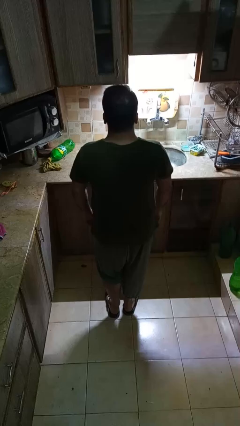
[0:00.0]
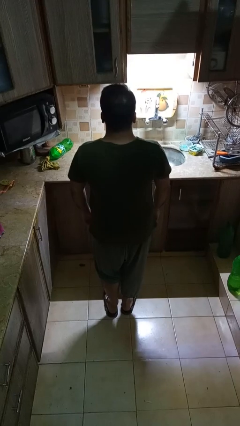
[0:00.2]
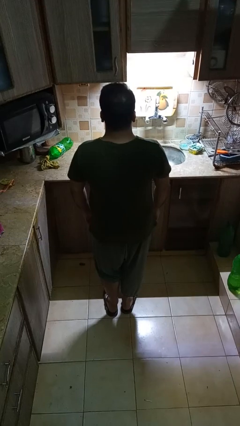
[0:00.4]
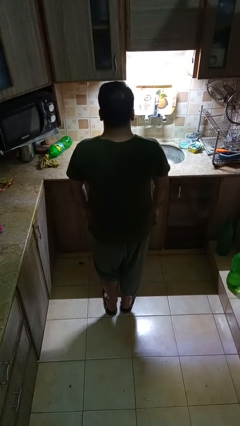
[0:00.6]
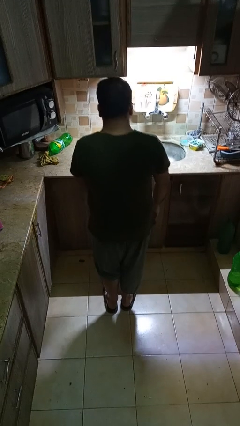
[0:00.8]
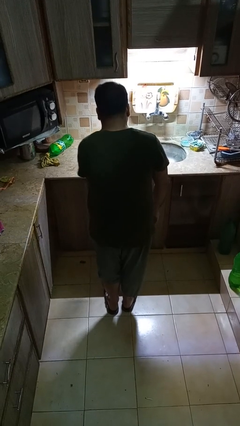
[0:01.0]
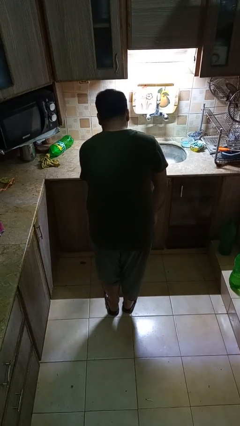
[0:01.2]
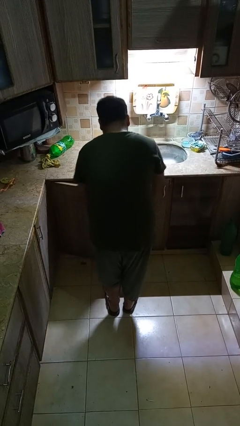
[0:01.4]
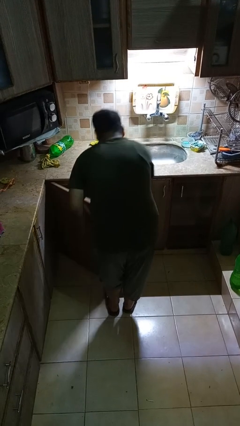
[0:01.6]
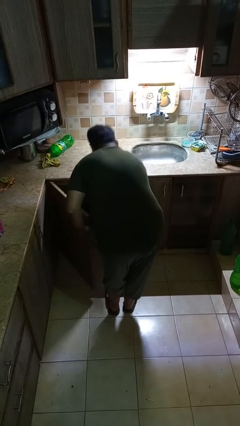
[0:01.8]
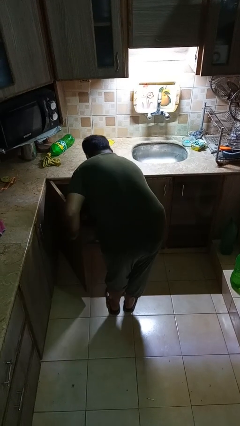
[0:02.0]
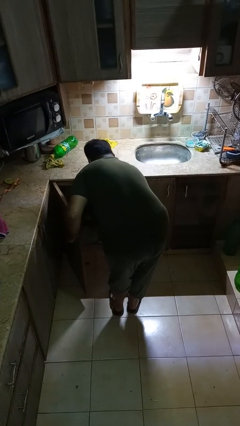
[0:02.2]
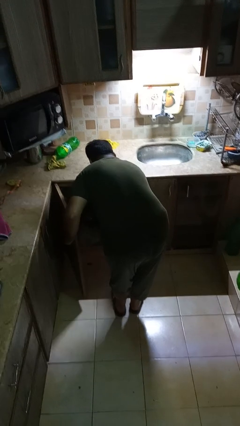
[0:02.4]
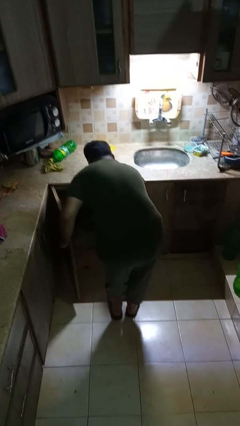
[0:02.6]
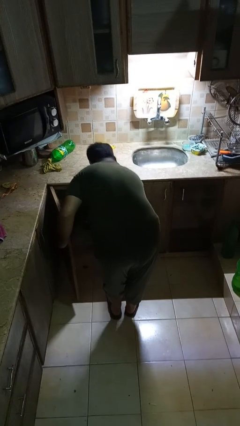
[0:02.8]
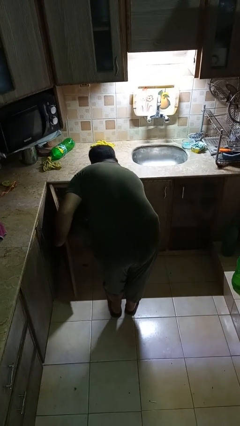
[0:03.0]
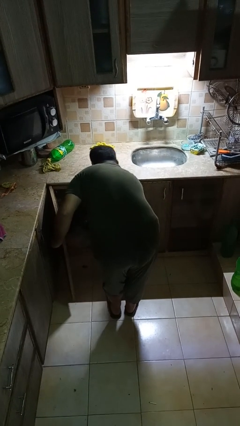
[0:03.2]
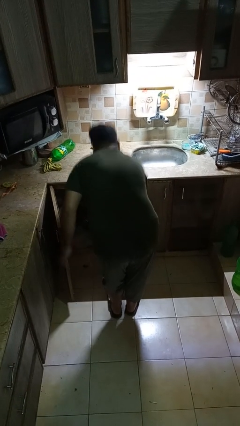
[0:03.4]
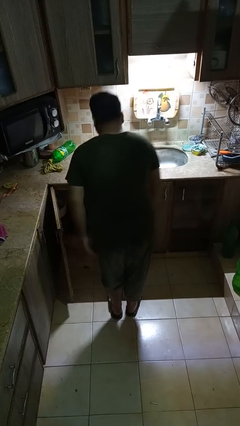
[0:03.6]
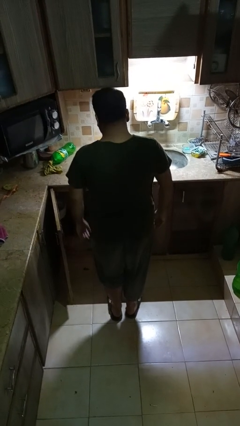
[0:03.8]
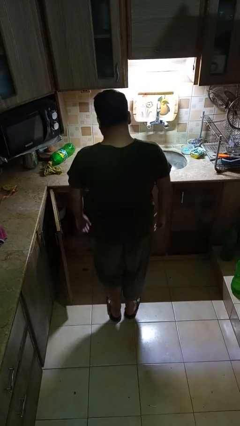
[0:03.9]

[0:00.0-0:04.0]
person takes object from cabinet

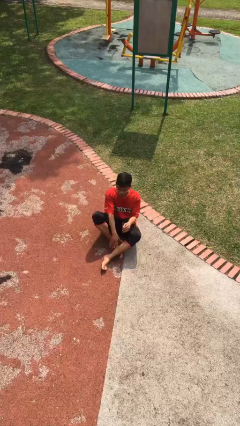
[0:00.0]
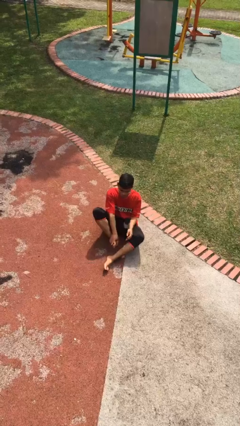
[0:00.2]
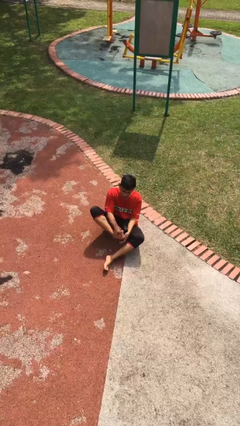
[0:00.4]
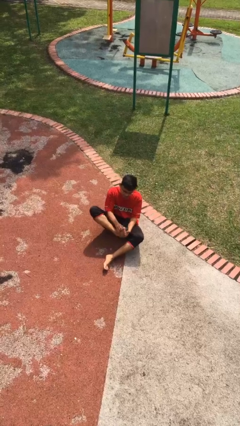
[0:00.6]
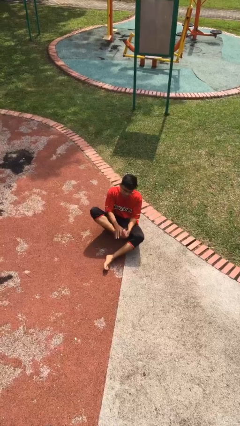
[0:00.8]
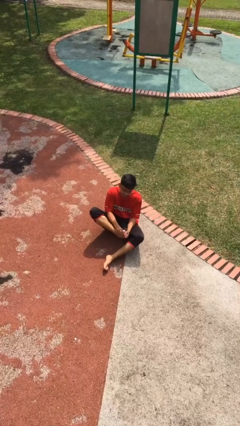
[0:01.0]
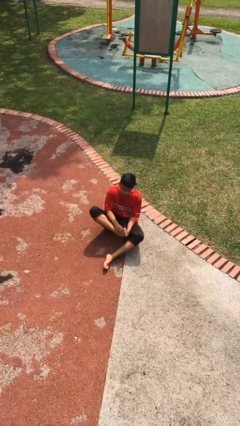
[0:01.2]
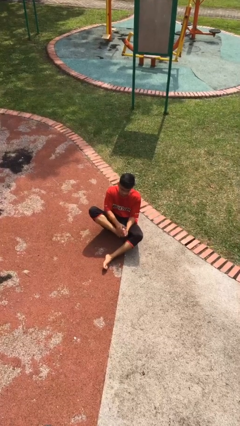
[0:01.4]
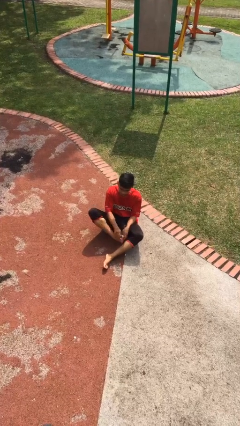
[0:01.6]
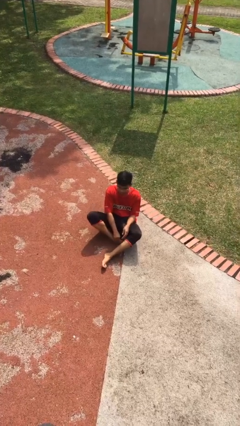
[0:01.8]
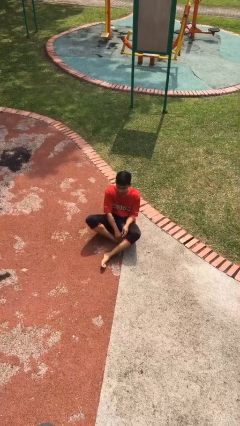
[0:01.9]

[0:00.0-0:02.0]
person rubs foot

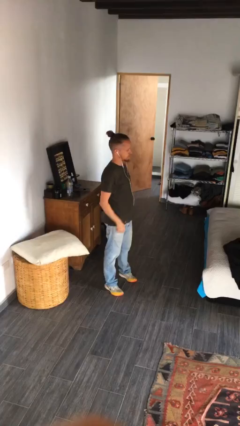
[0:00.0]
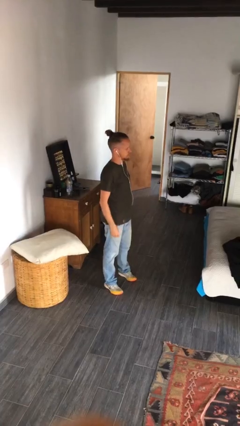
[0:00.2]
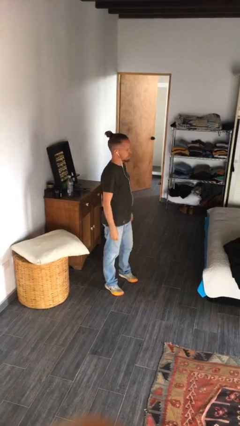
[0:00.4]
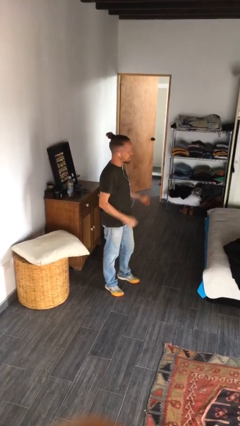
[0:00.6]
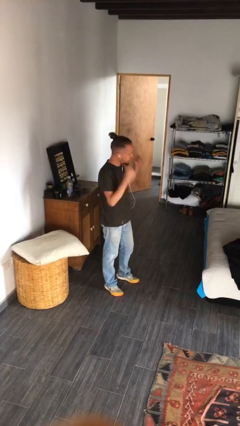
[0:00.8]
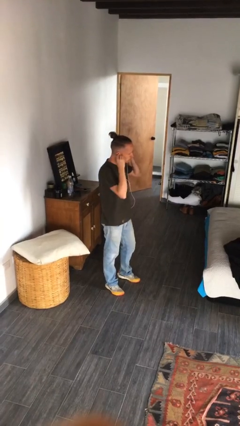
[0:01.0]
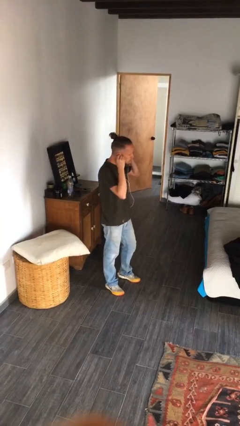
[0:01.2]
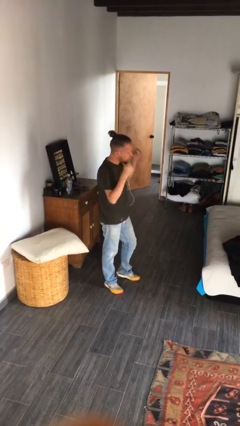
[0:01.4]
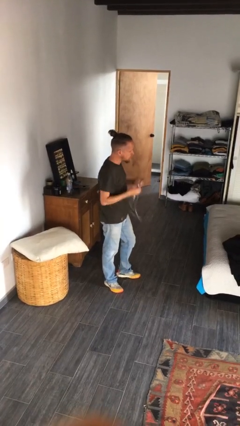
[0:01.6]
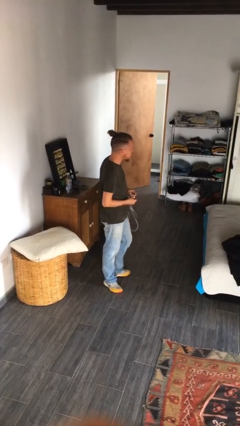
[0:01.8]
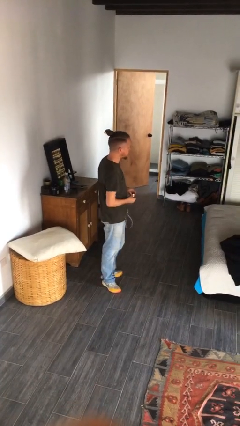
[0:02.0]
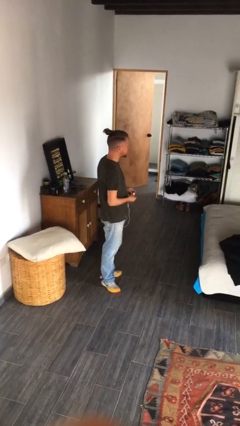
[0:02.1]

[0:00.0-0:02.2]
person takes off headphones

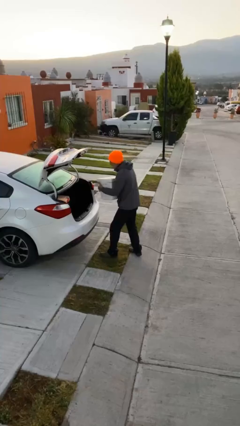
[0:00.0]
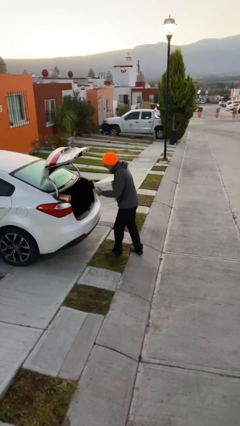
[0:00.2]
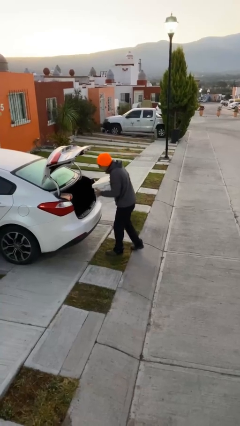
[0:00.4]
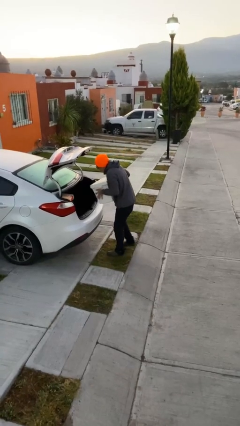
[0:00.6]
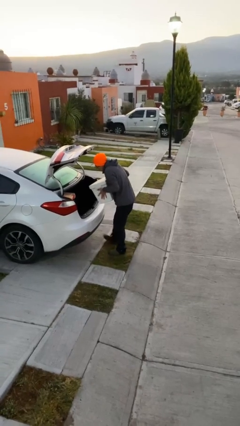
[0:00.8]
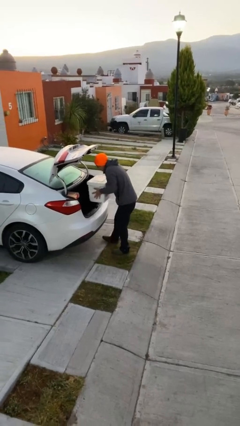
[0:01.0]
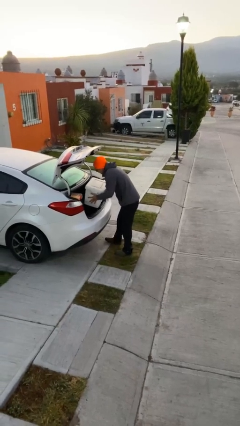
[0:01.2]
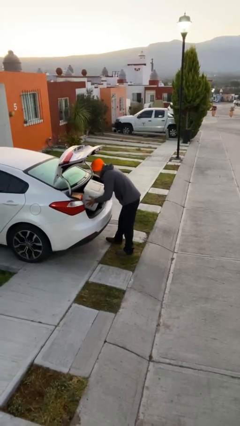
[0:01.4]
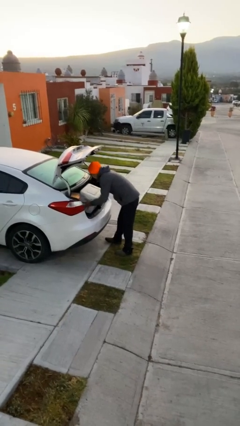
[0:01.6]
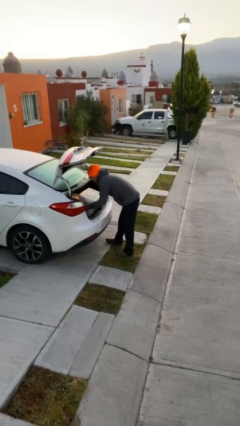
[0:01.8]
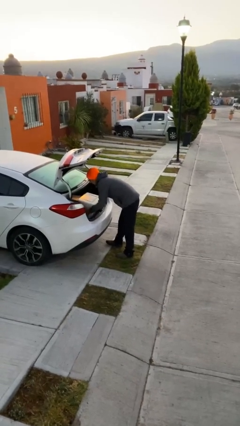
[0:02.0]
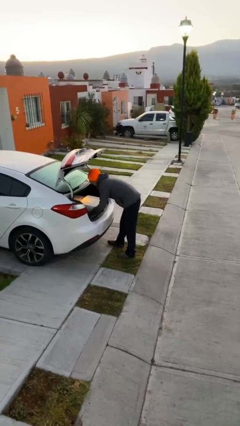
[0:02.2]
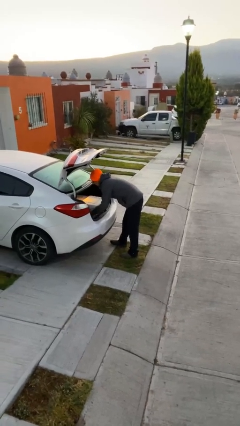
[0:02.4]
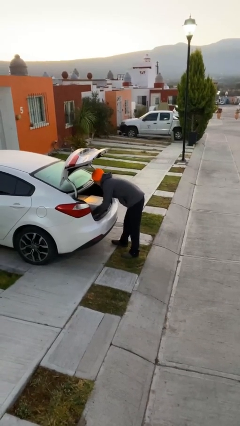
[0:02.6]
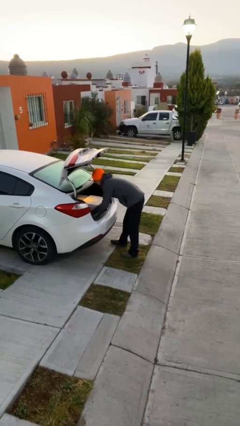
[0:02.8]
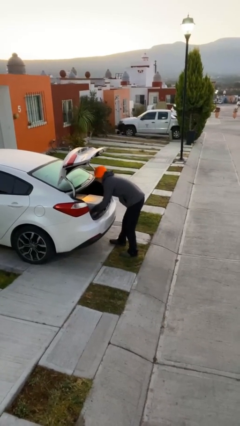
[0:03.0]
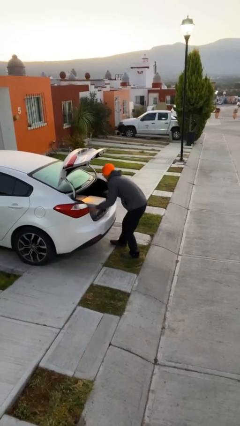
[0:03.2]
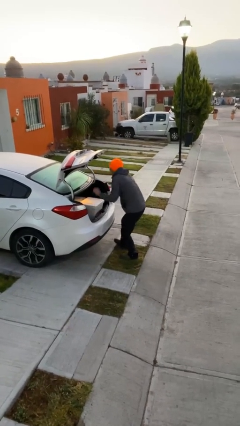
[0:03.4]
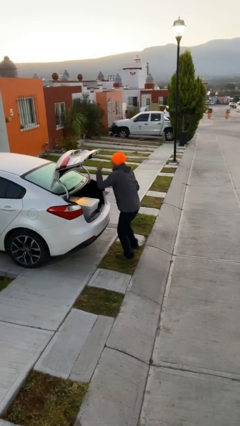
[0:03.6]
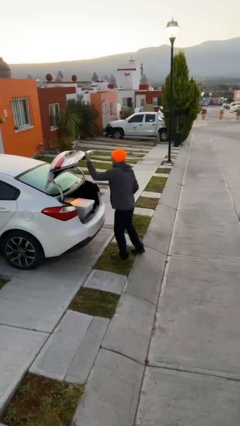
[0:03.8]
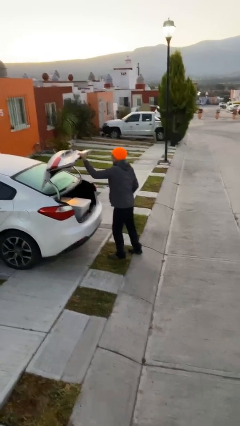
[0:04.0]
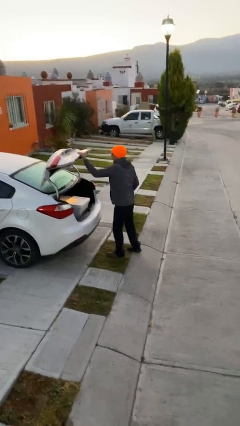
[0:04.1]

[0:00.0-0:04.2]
person loads car

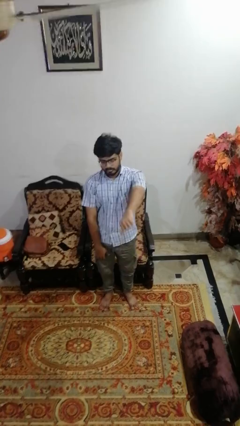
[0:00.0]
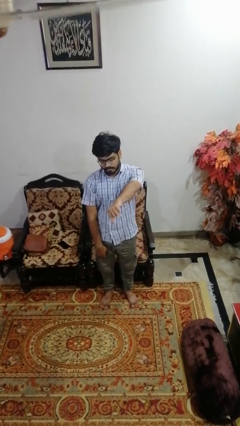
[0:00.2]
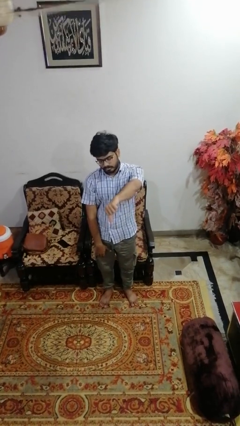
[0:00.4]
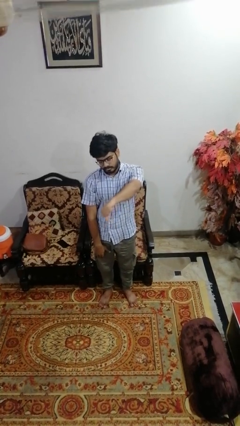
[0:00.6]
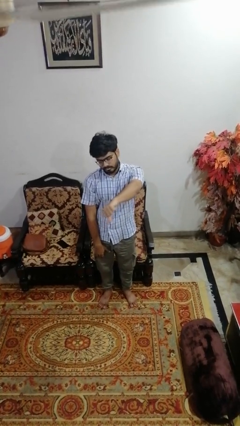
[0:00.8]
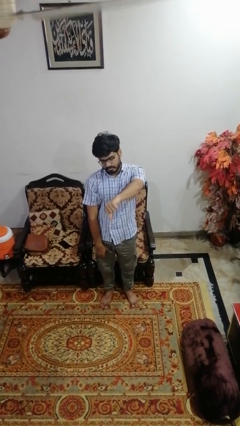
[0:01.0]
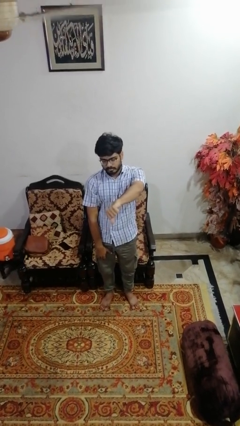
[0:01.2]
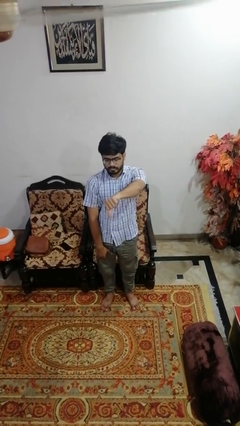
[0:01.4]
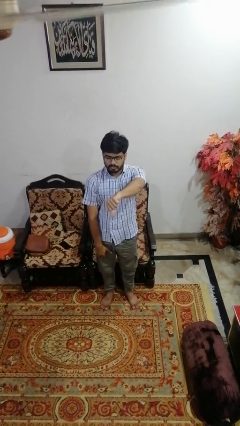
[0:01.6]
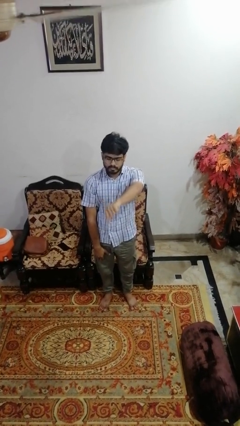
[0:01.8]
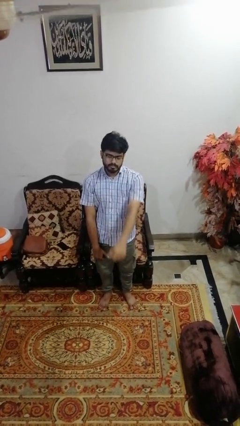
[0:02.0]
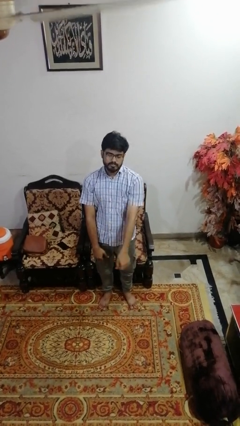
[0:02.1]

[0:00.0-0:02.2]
person gestures thumbs down

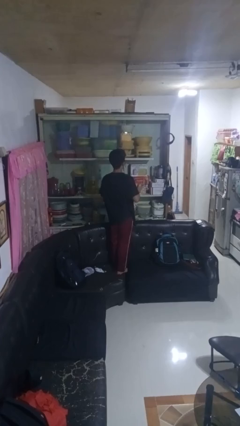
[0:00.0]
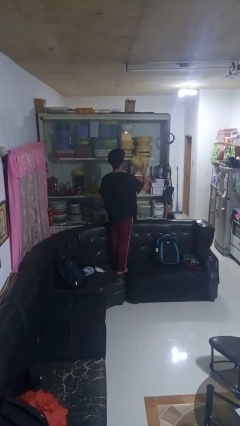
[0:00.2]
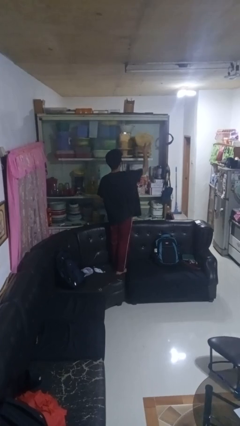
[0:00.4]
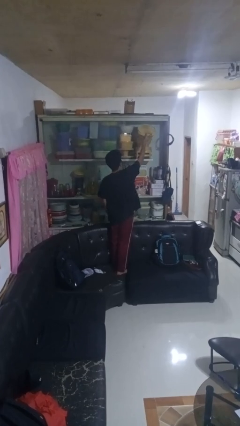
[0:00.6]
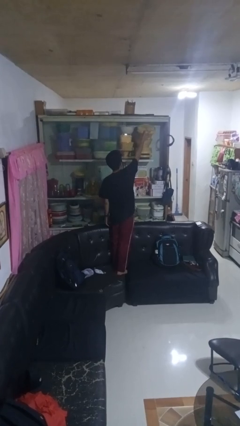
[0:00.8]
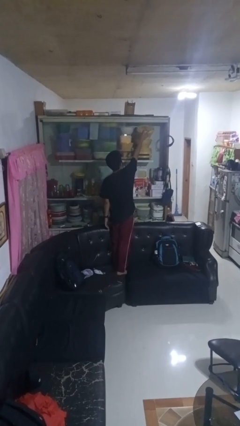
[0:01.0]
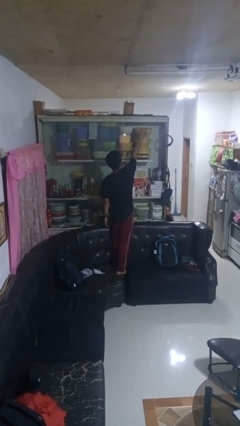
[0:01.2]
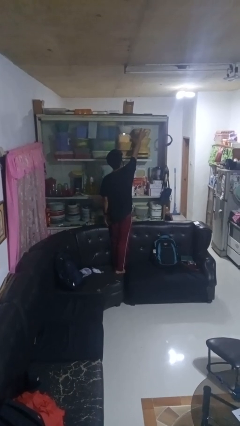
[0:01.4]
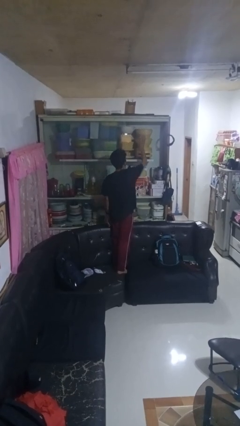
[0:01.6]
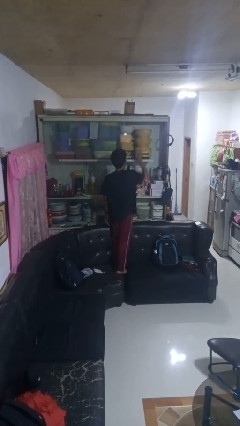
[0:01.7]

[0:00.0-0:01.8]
person puts down object into cabinet

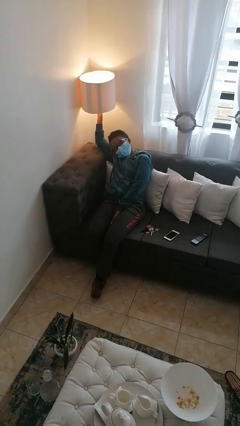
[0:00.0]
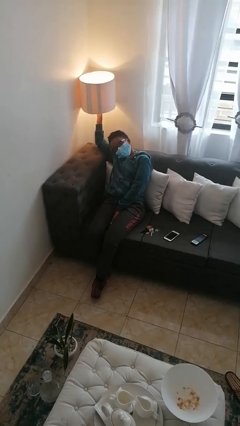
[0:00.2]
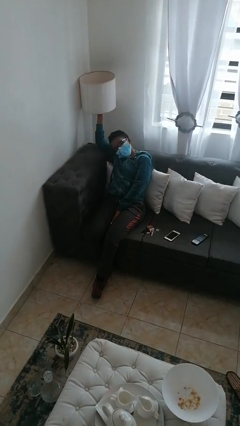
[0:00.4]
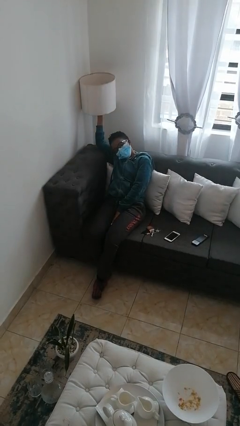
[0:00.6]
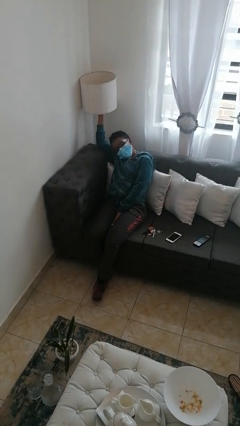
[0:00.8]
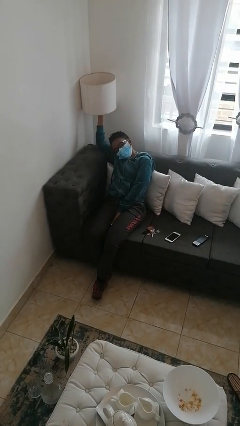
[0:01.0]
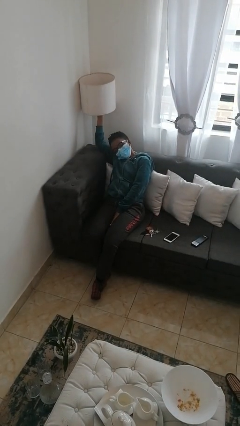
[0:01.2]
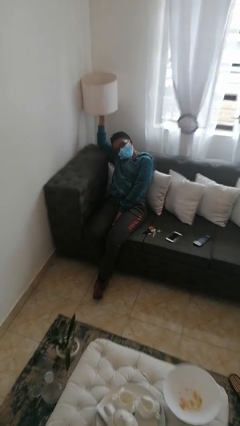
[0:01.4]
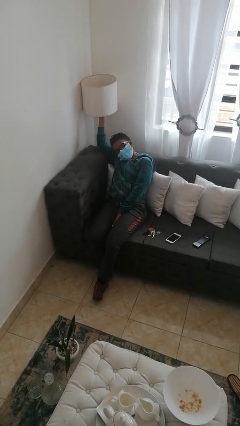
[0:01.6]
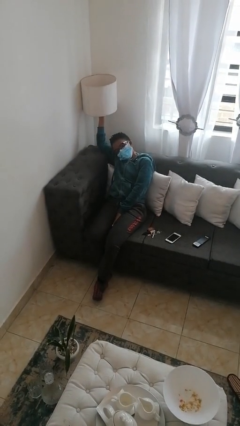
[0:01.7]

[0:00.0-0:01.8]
person turns off lamp
